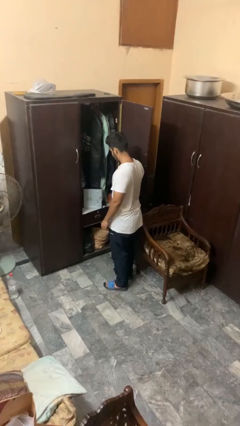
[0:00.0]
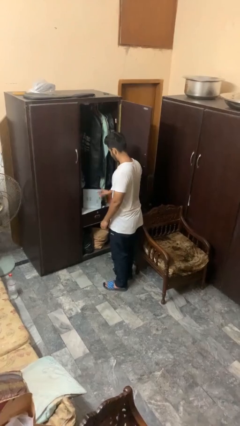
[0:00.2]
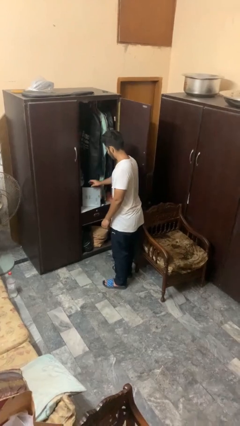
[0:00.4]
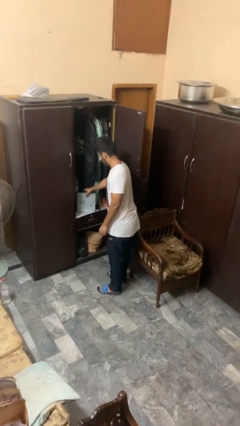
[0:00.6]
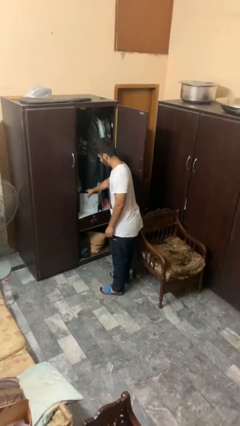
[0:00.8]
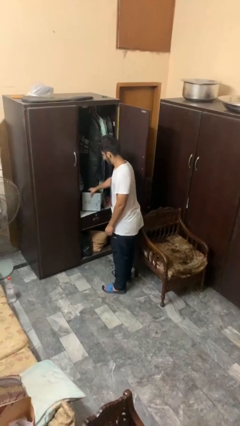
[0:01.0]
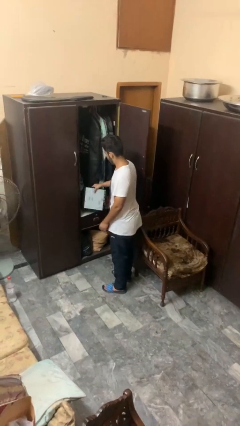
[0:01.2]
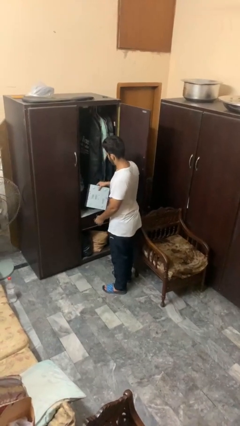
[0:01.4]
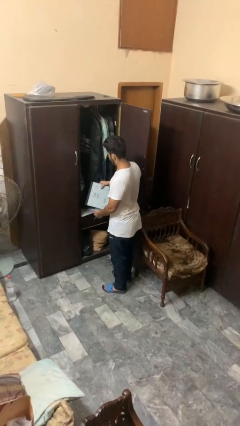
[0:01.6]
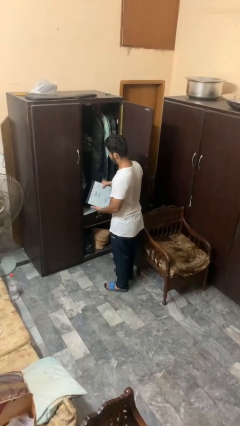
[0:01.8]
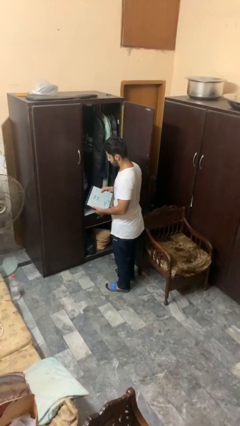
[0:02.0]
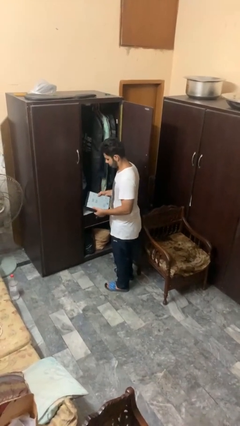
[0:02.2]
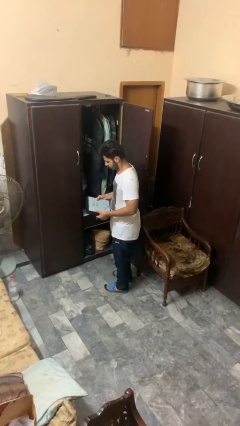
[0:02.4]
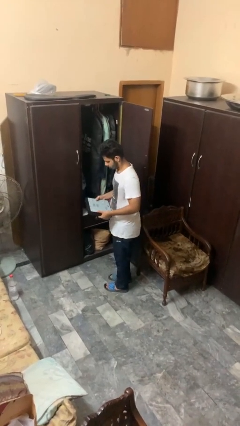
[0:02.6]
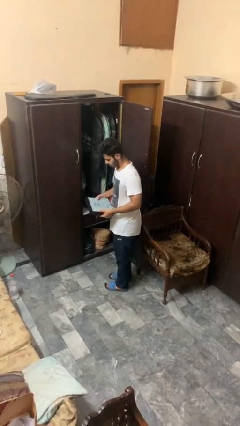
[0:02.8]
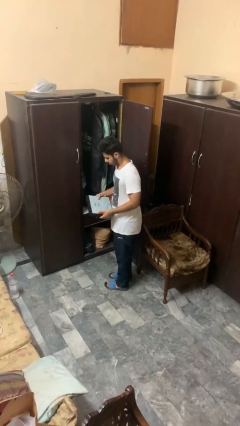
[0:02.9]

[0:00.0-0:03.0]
person picks up object from cabinet

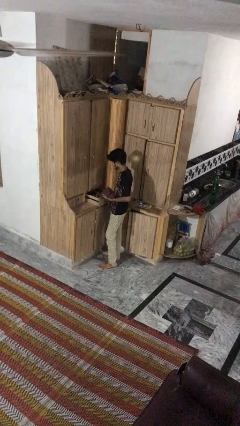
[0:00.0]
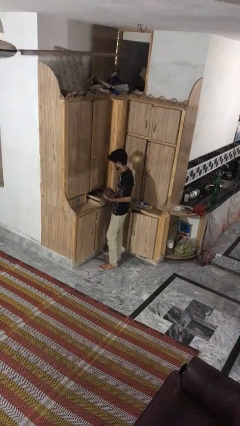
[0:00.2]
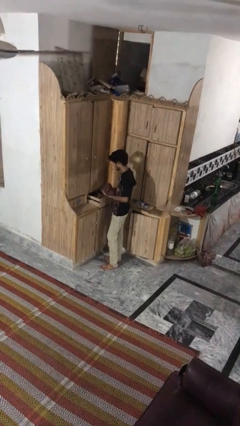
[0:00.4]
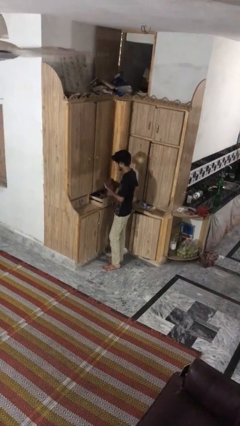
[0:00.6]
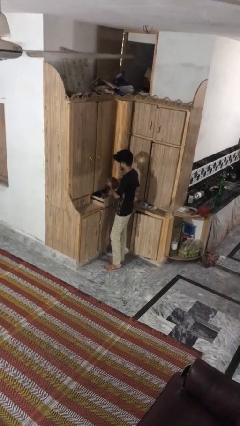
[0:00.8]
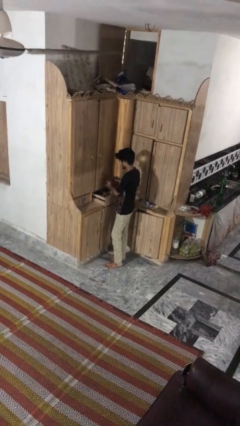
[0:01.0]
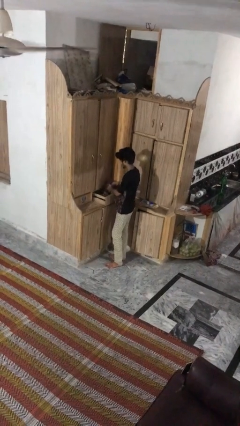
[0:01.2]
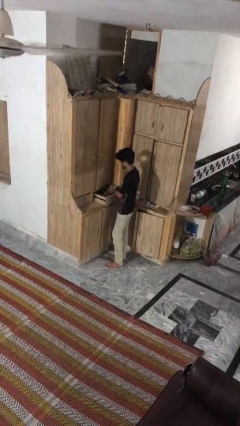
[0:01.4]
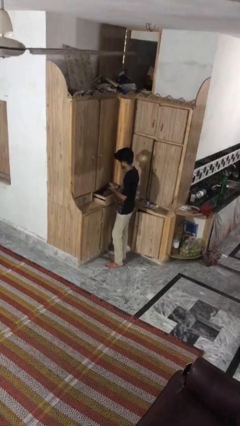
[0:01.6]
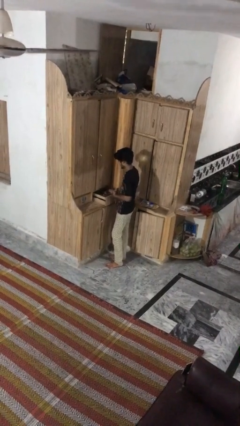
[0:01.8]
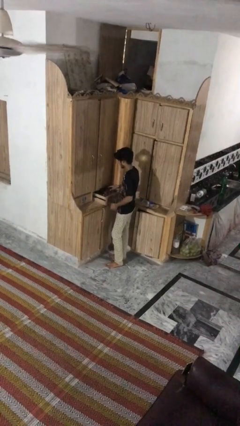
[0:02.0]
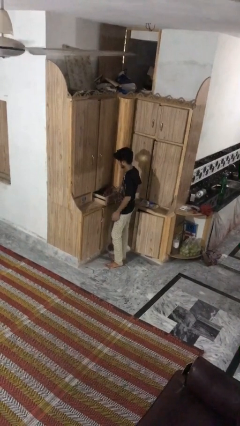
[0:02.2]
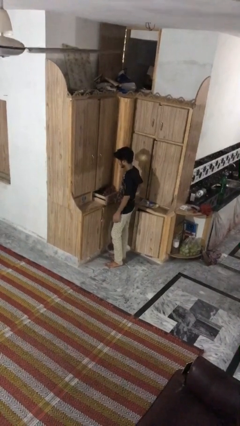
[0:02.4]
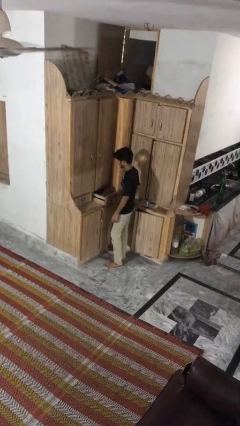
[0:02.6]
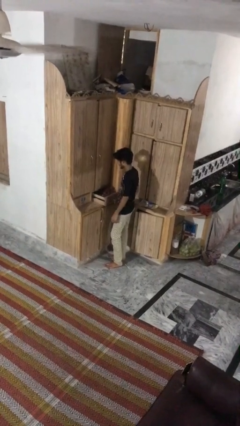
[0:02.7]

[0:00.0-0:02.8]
person puts clothes into dresser

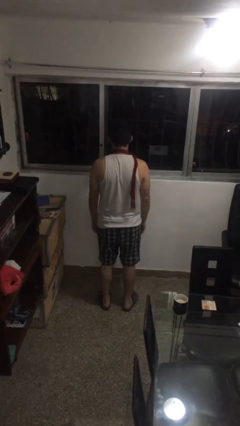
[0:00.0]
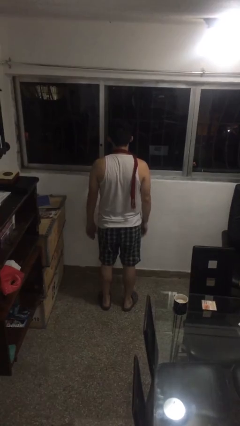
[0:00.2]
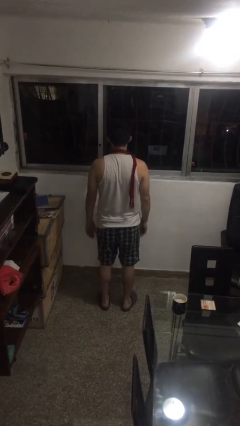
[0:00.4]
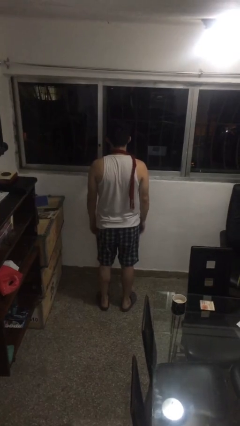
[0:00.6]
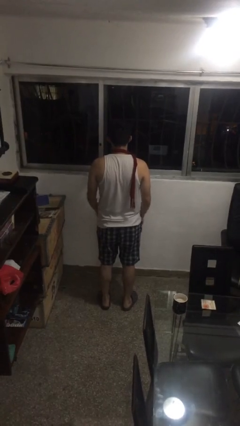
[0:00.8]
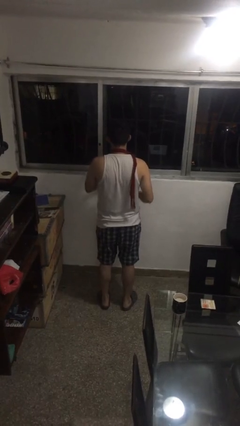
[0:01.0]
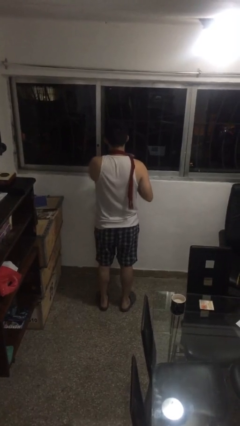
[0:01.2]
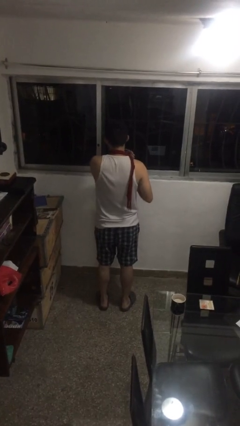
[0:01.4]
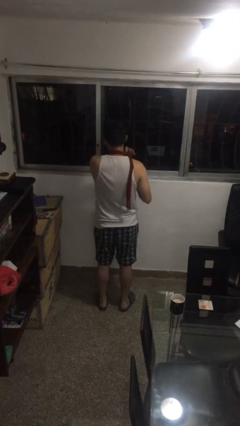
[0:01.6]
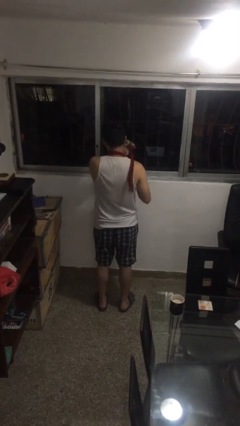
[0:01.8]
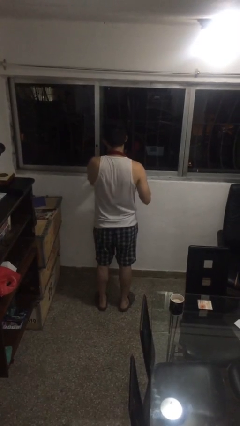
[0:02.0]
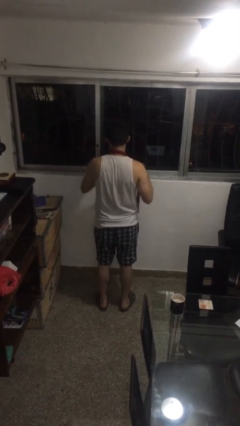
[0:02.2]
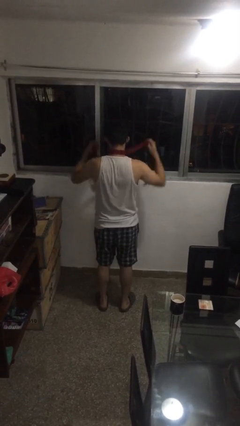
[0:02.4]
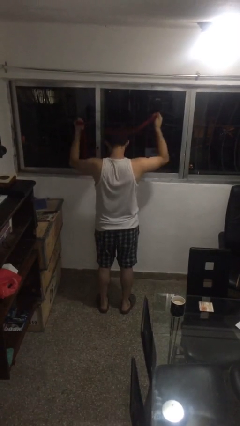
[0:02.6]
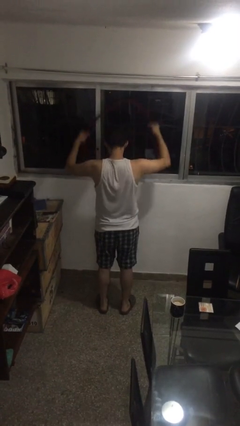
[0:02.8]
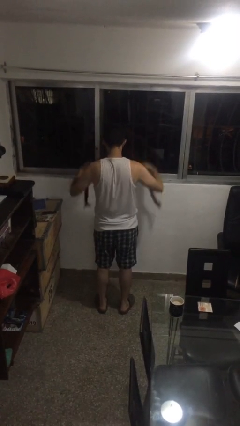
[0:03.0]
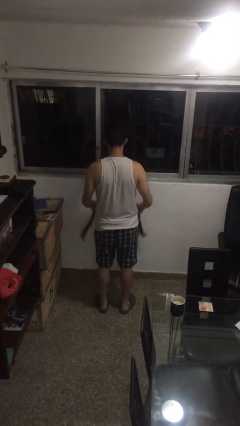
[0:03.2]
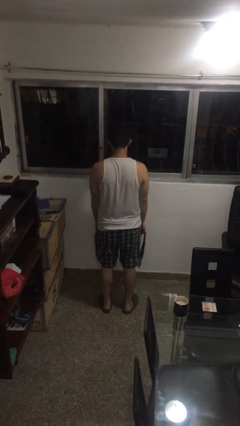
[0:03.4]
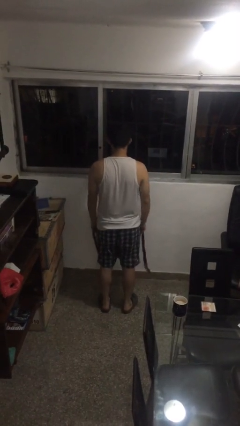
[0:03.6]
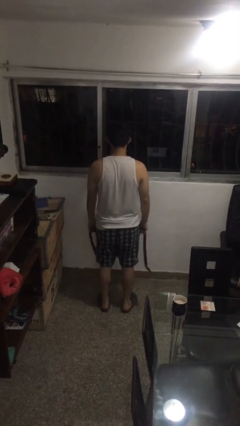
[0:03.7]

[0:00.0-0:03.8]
person takes off scarf

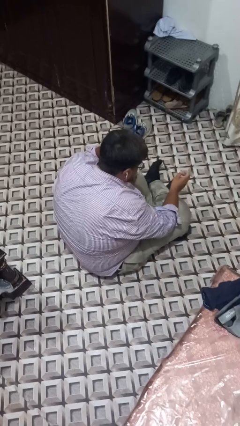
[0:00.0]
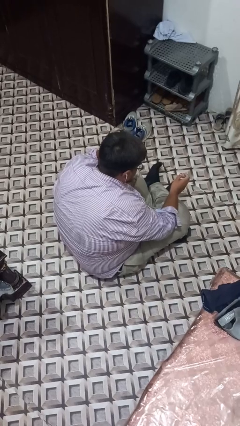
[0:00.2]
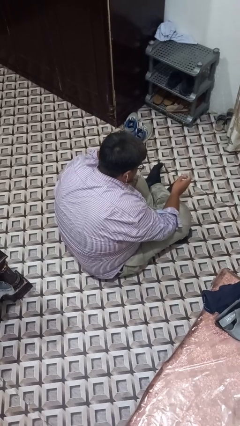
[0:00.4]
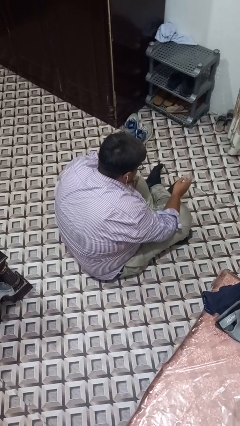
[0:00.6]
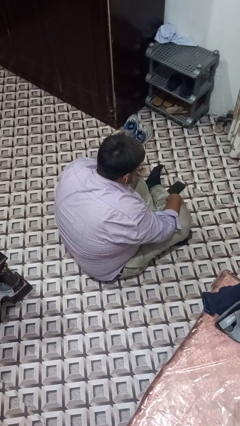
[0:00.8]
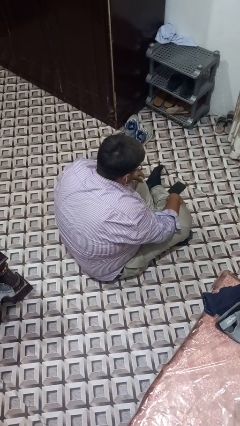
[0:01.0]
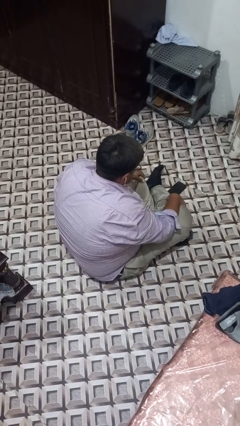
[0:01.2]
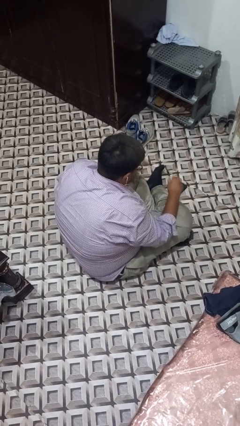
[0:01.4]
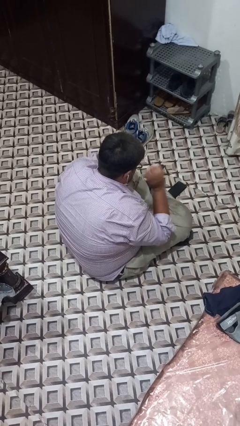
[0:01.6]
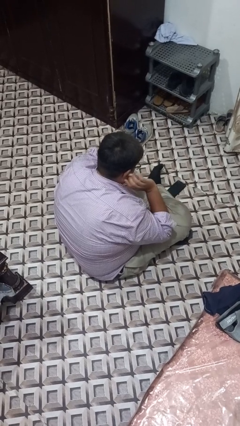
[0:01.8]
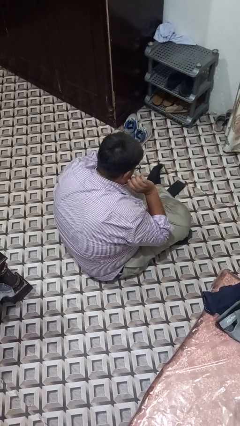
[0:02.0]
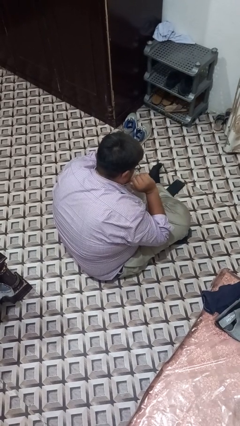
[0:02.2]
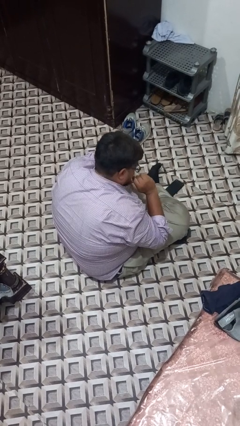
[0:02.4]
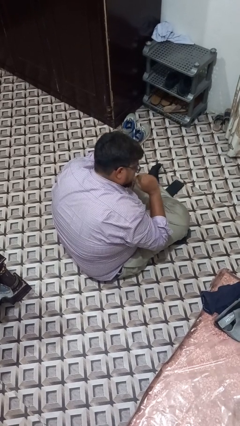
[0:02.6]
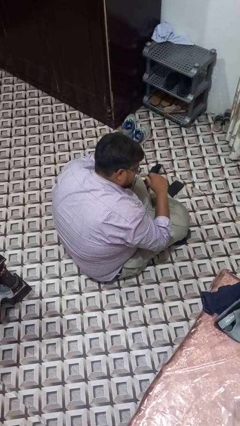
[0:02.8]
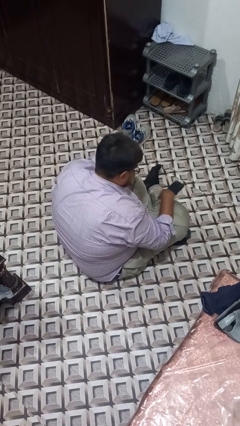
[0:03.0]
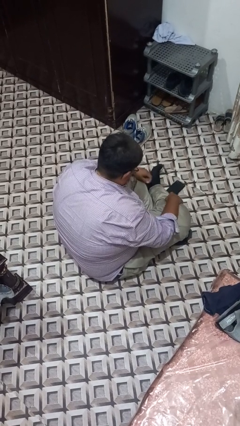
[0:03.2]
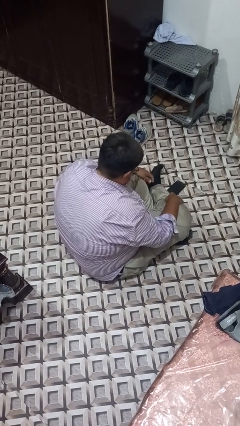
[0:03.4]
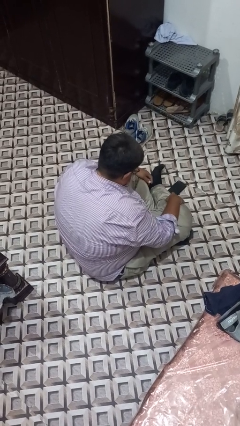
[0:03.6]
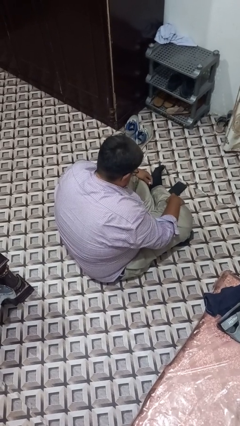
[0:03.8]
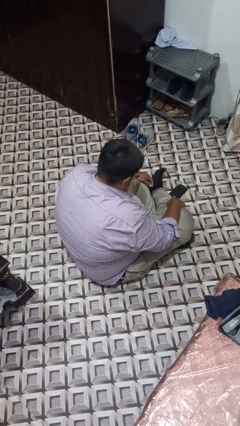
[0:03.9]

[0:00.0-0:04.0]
person takes off headphones

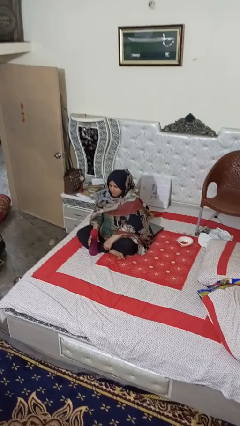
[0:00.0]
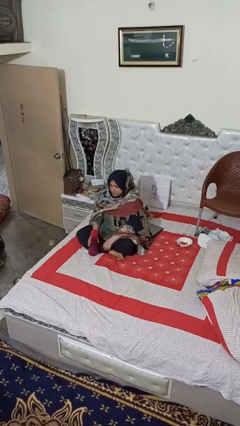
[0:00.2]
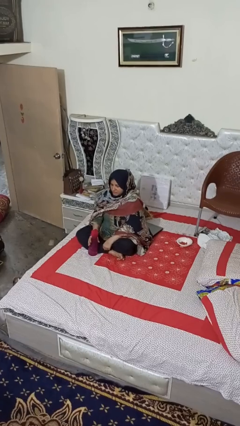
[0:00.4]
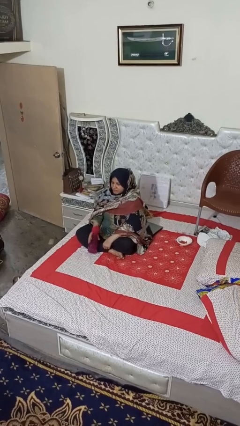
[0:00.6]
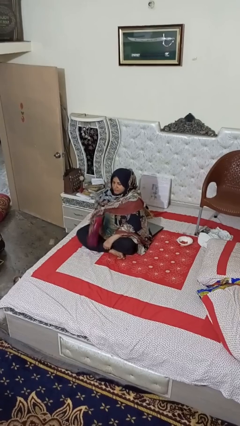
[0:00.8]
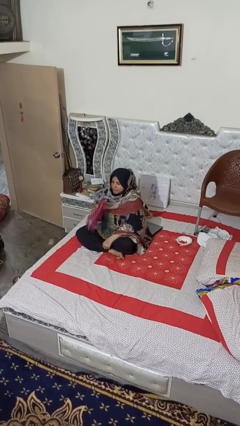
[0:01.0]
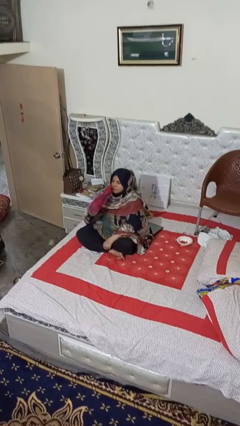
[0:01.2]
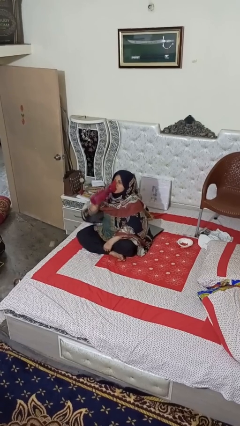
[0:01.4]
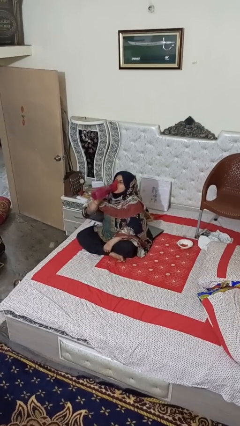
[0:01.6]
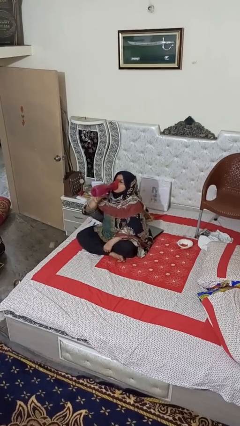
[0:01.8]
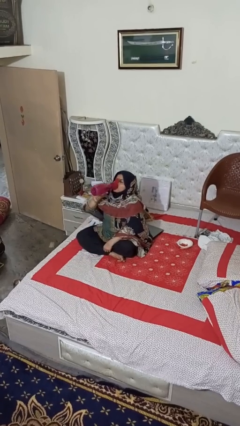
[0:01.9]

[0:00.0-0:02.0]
person drinks from bottle

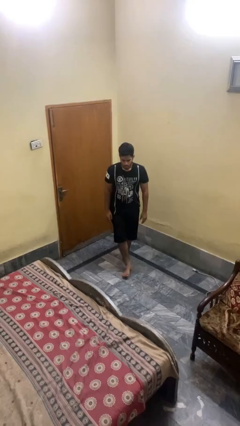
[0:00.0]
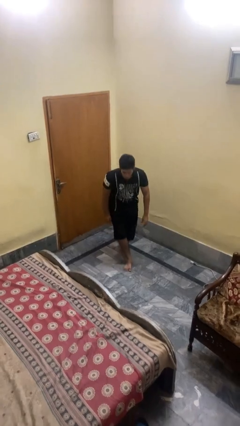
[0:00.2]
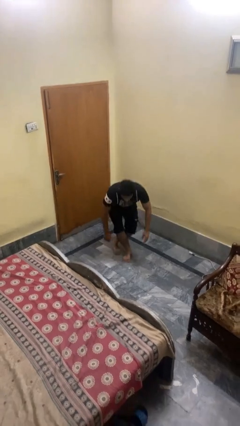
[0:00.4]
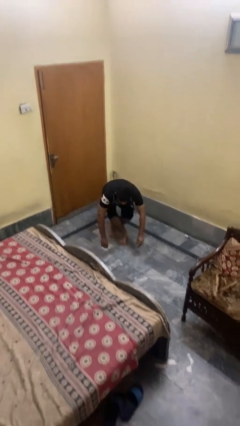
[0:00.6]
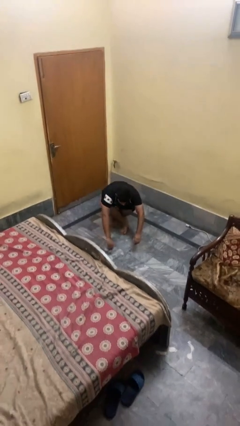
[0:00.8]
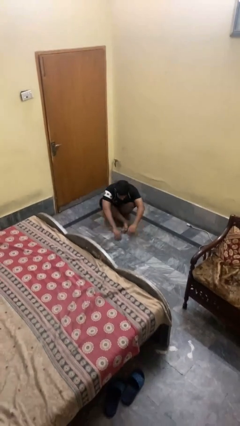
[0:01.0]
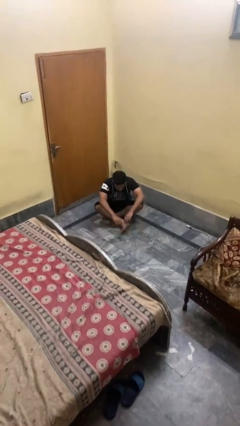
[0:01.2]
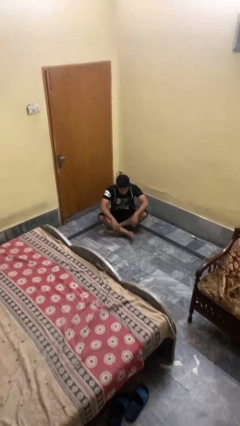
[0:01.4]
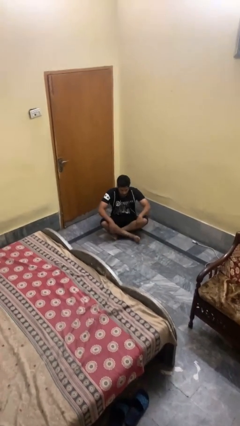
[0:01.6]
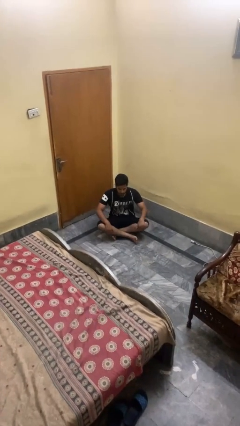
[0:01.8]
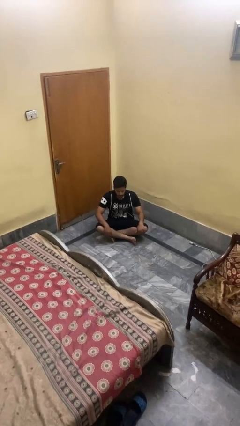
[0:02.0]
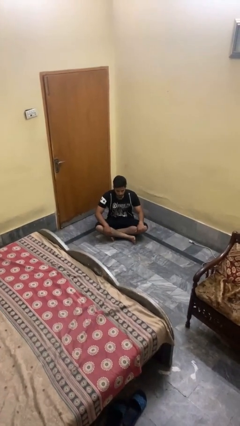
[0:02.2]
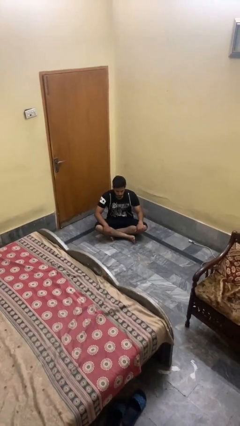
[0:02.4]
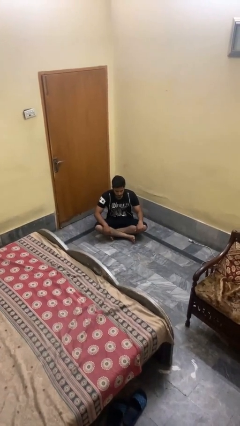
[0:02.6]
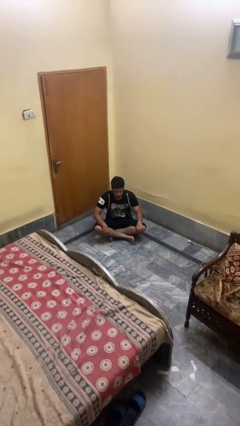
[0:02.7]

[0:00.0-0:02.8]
person sits crisscross
